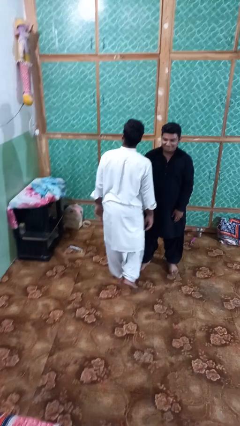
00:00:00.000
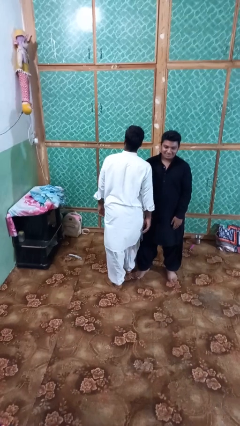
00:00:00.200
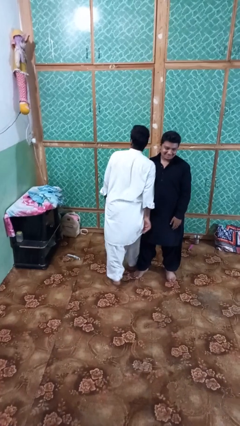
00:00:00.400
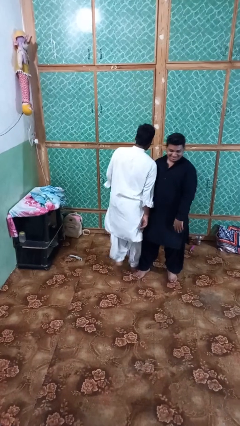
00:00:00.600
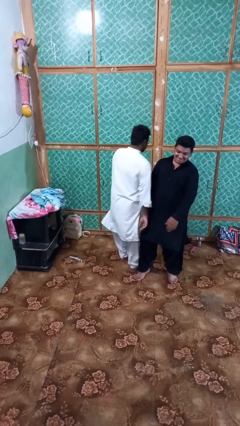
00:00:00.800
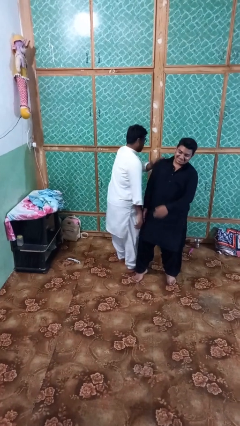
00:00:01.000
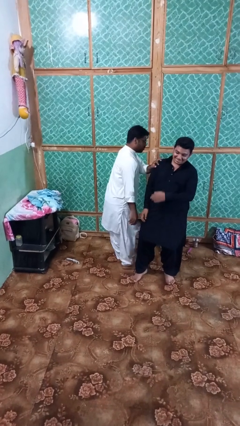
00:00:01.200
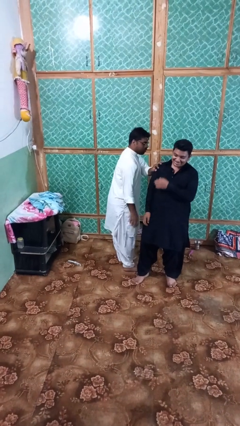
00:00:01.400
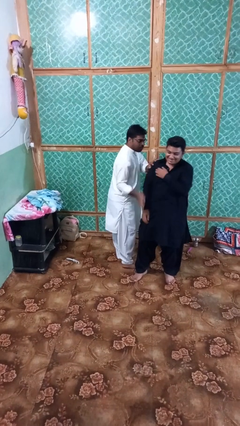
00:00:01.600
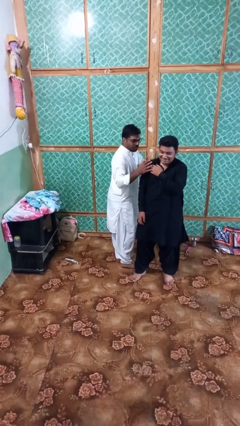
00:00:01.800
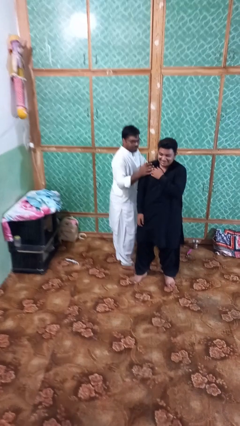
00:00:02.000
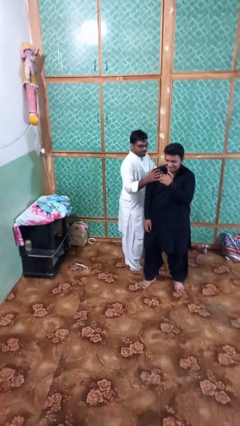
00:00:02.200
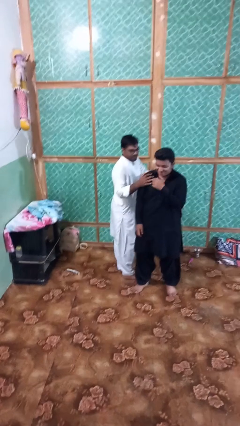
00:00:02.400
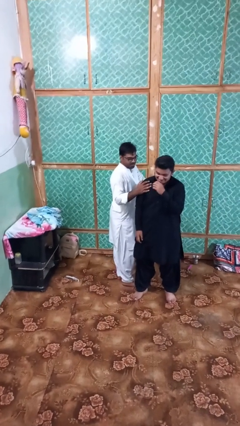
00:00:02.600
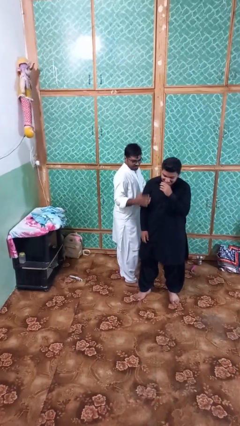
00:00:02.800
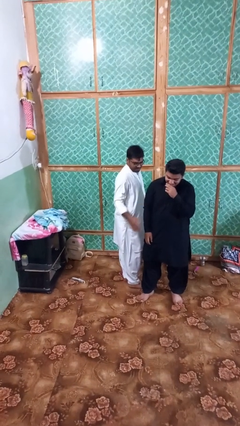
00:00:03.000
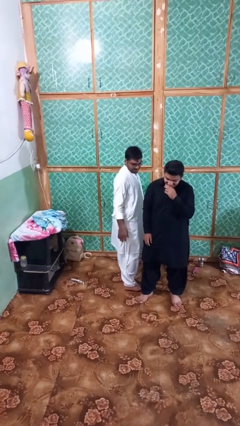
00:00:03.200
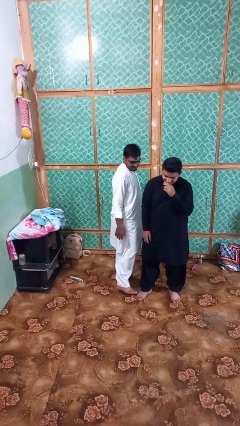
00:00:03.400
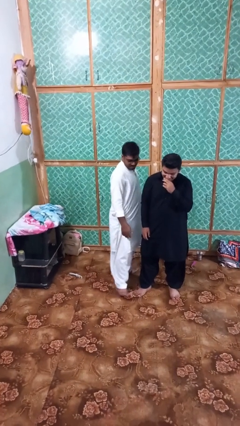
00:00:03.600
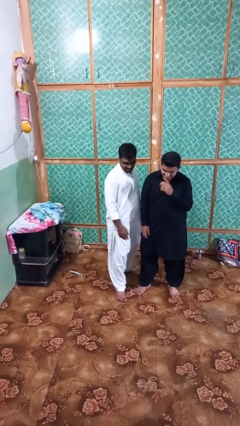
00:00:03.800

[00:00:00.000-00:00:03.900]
person bumps into person

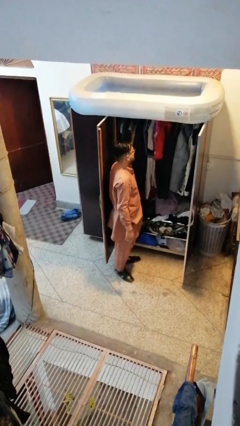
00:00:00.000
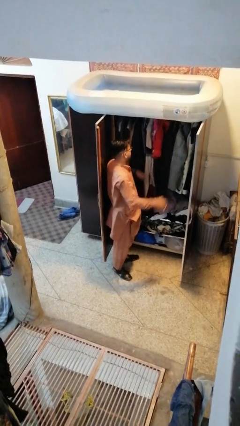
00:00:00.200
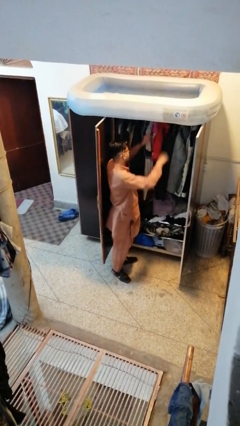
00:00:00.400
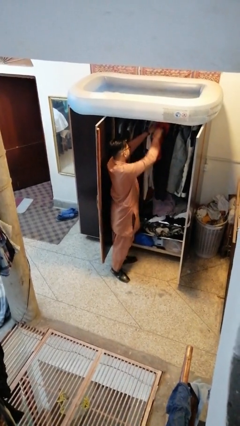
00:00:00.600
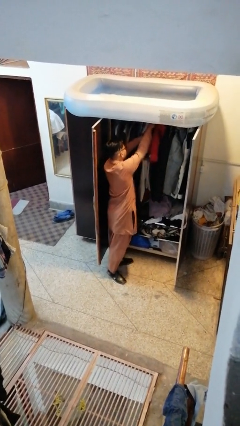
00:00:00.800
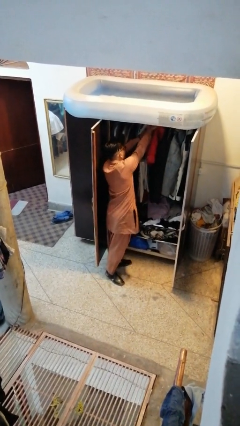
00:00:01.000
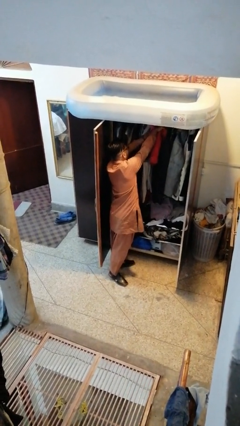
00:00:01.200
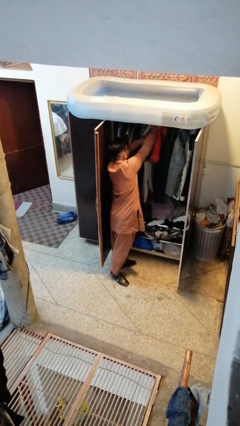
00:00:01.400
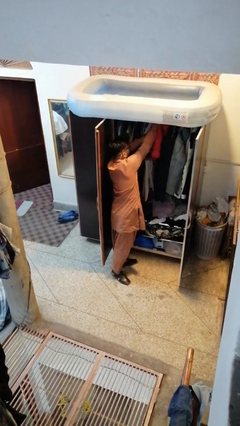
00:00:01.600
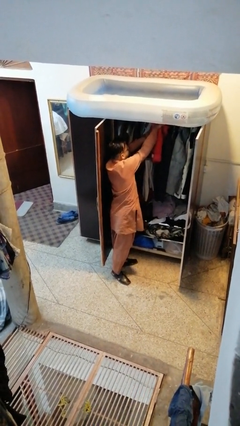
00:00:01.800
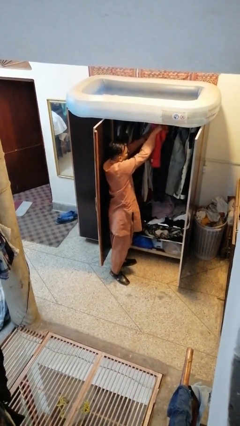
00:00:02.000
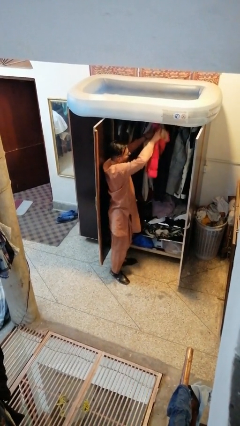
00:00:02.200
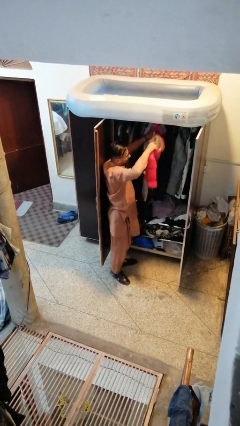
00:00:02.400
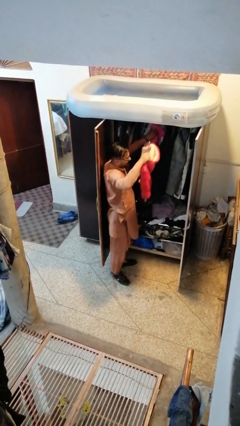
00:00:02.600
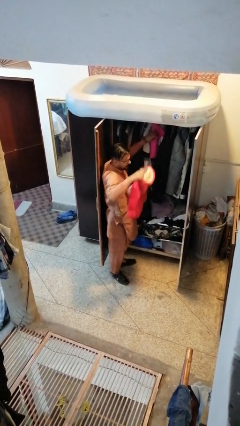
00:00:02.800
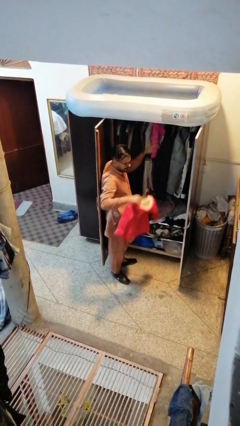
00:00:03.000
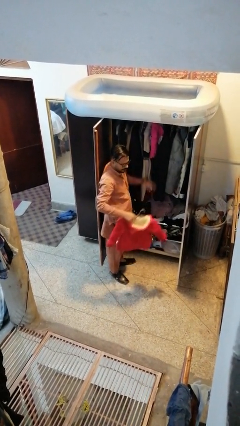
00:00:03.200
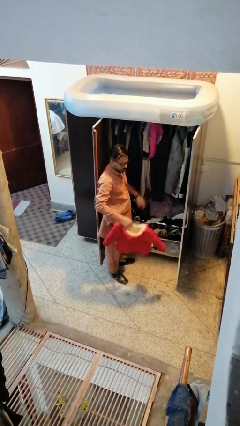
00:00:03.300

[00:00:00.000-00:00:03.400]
person takes clothes from closet

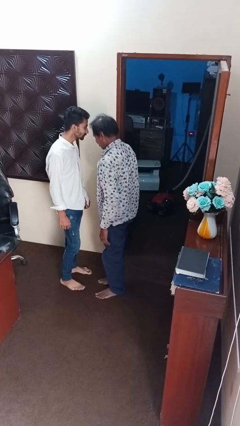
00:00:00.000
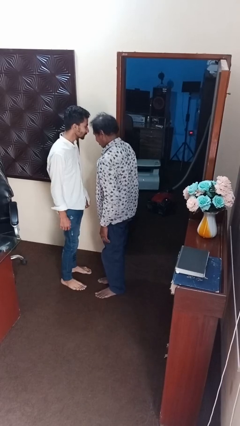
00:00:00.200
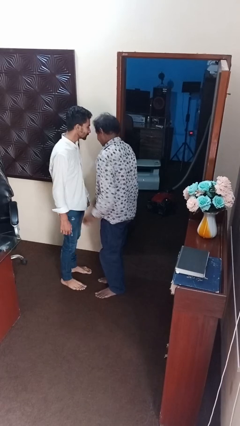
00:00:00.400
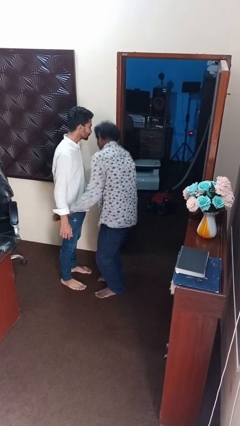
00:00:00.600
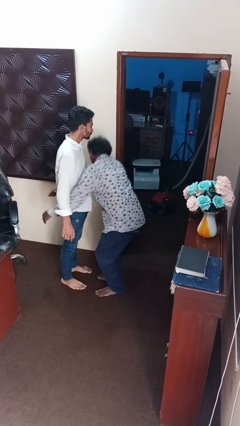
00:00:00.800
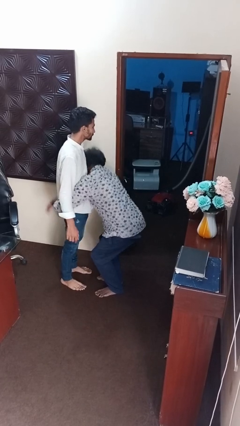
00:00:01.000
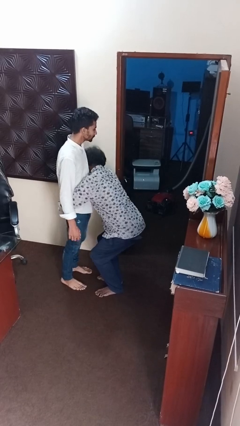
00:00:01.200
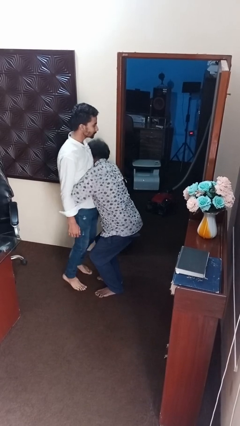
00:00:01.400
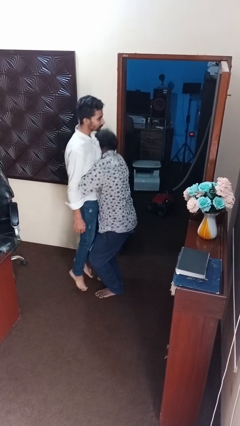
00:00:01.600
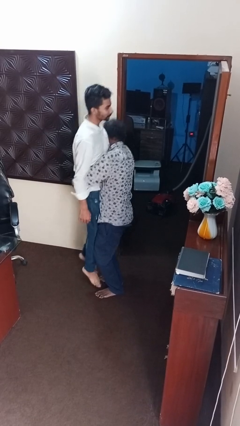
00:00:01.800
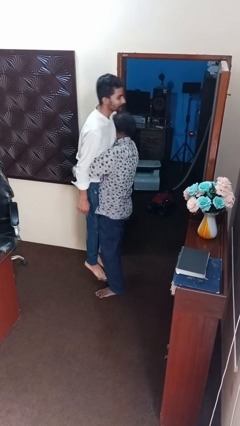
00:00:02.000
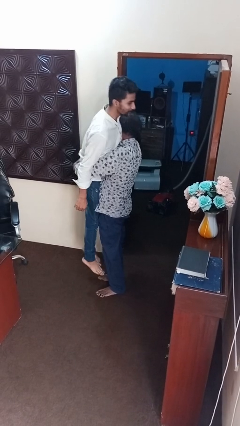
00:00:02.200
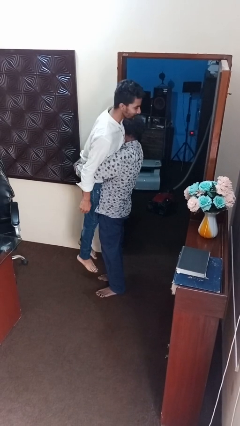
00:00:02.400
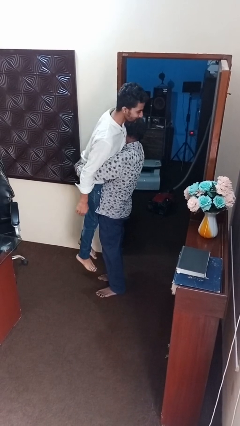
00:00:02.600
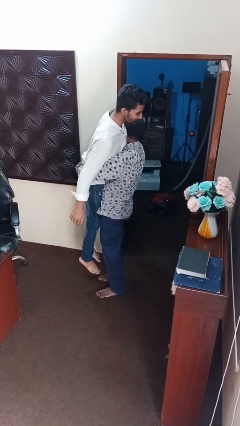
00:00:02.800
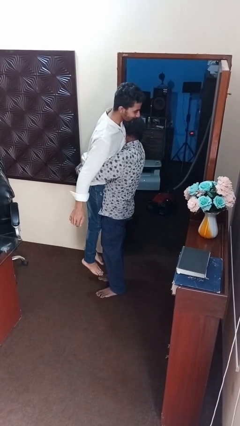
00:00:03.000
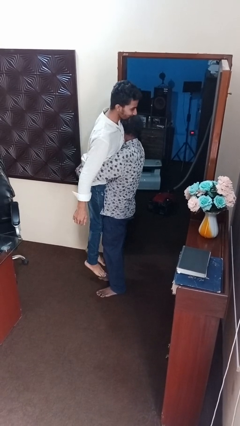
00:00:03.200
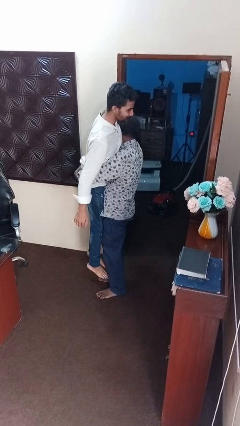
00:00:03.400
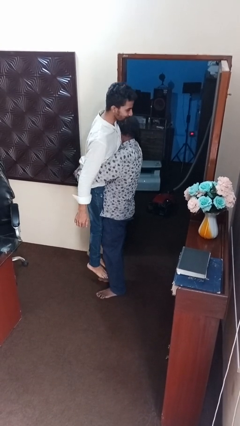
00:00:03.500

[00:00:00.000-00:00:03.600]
person picks up person

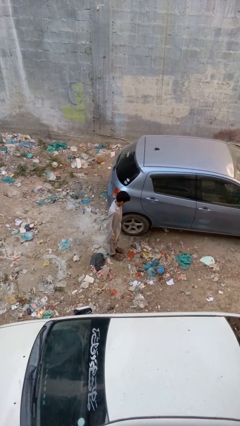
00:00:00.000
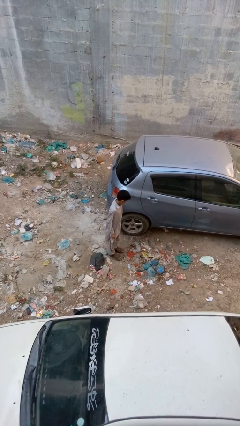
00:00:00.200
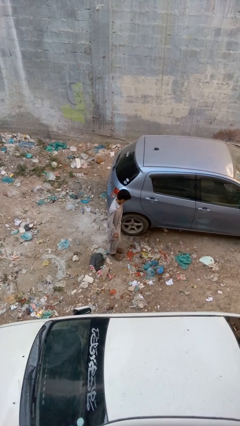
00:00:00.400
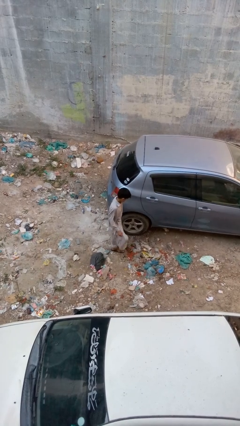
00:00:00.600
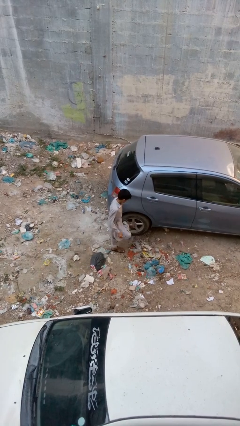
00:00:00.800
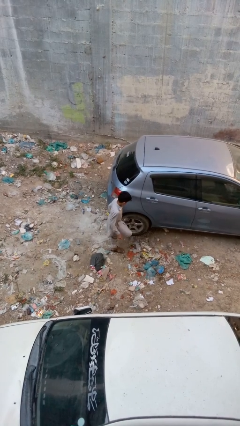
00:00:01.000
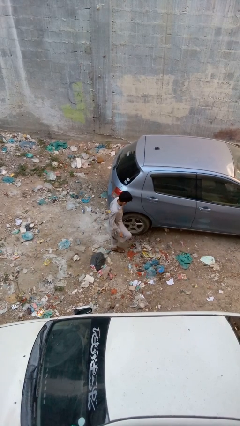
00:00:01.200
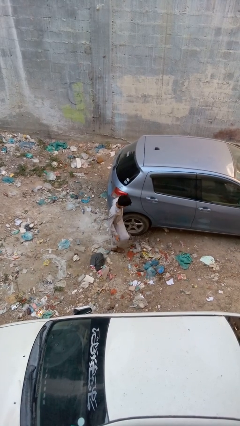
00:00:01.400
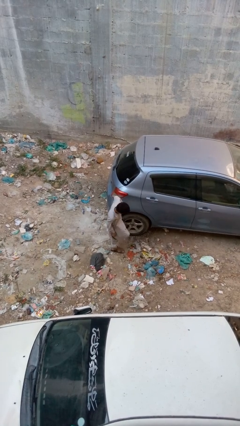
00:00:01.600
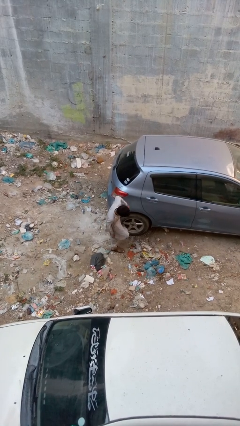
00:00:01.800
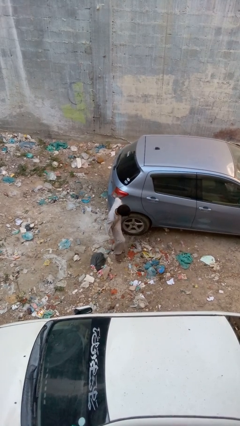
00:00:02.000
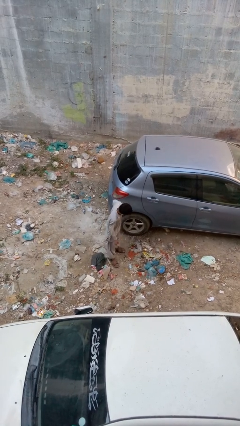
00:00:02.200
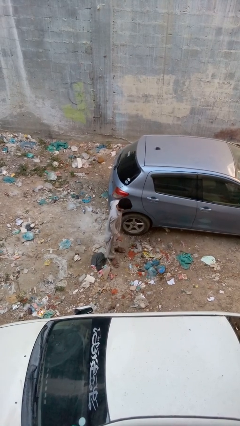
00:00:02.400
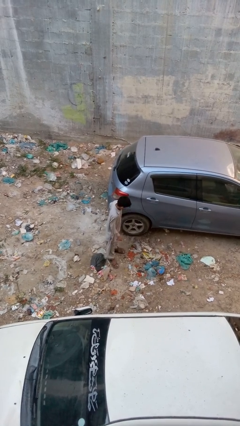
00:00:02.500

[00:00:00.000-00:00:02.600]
person kicks car tires

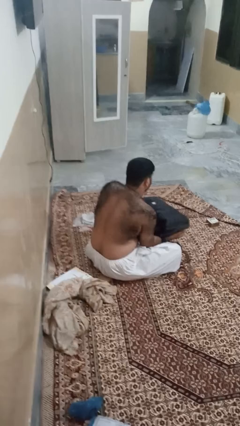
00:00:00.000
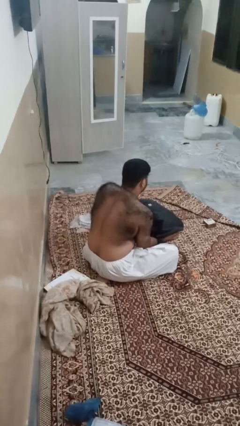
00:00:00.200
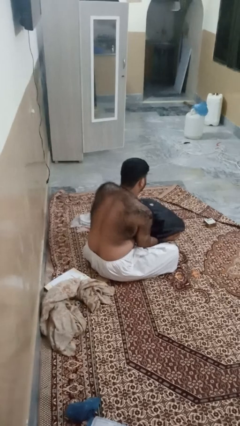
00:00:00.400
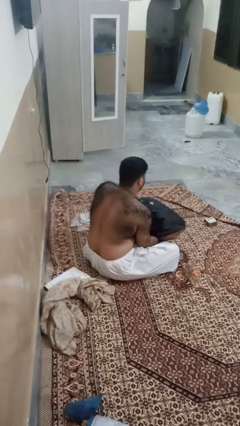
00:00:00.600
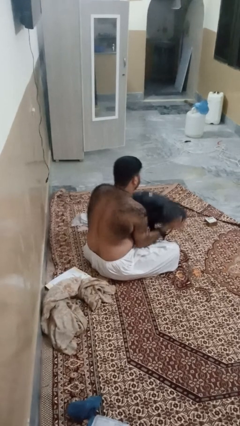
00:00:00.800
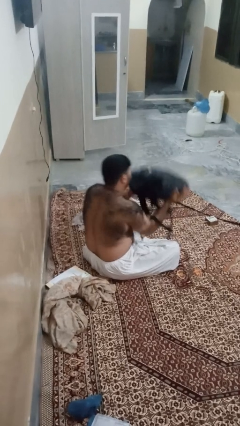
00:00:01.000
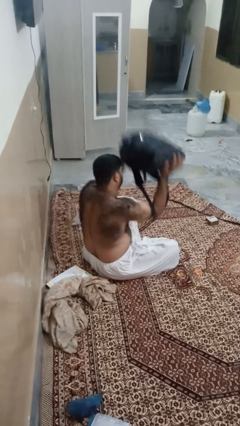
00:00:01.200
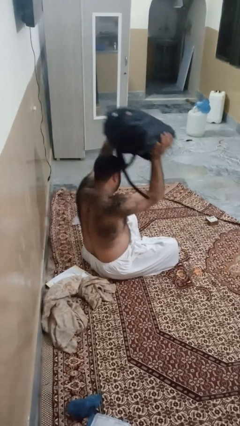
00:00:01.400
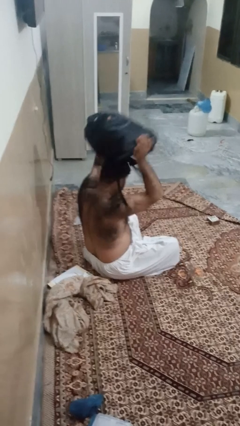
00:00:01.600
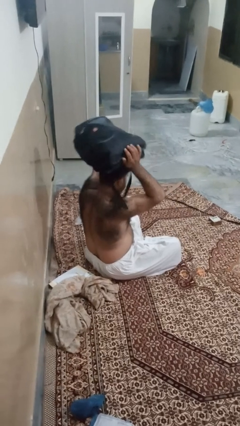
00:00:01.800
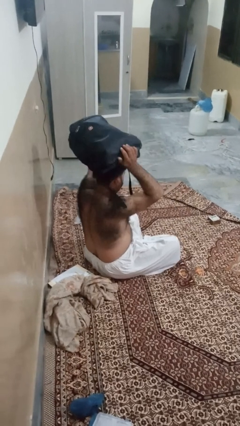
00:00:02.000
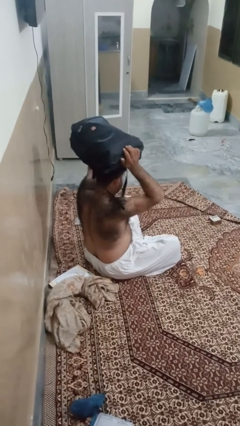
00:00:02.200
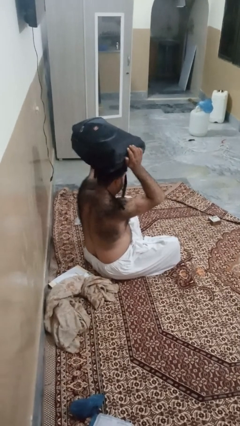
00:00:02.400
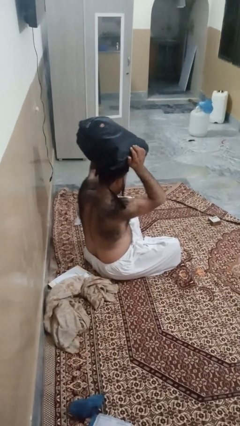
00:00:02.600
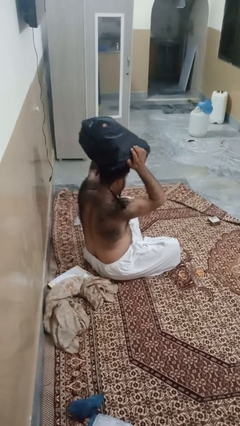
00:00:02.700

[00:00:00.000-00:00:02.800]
person holds object above head

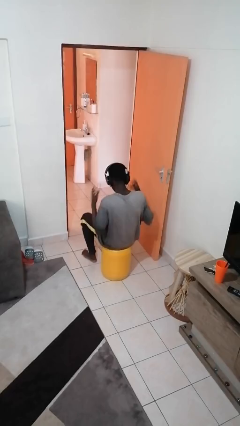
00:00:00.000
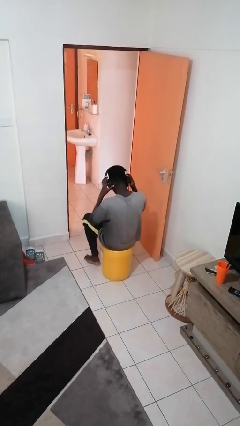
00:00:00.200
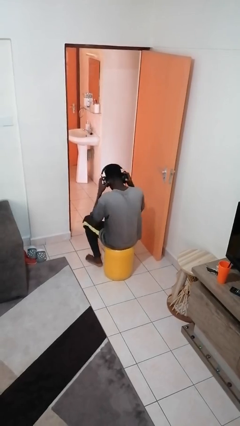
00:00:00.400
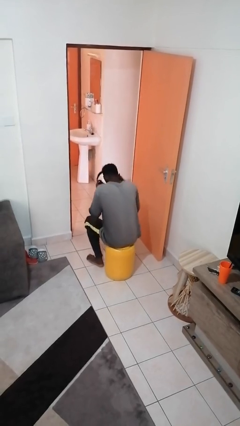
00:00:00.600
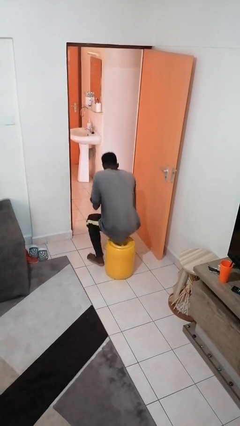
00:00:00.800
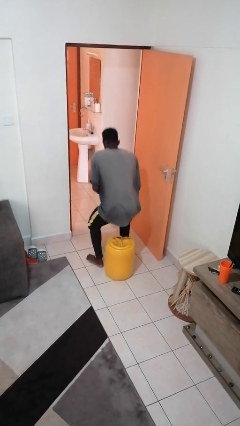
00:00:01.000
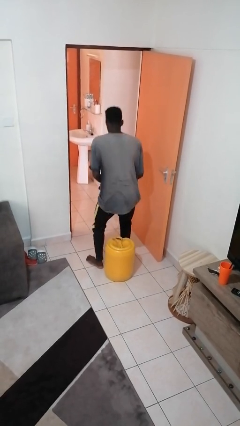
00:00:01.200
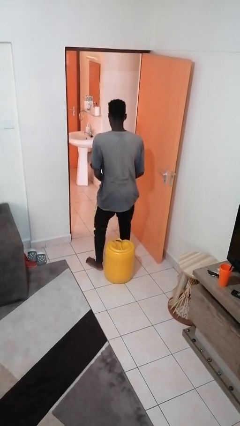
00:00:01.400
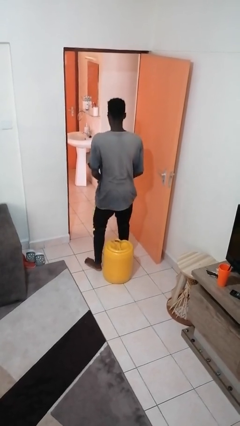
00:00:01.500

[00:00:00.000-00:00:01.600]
person takes off headphones
